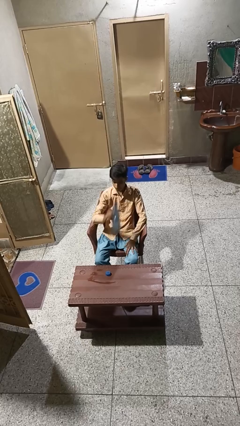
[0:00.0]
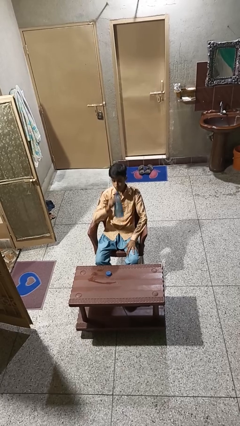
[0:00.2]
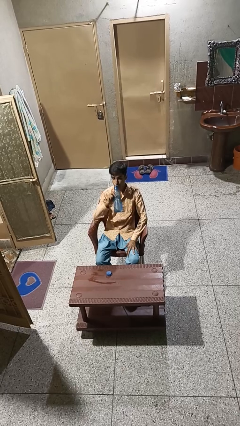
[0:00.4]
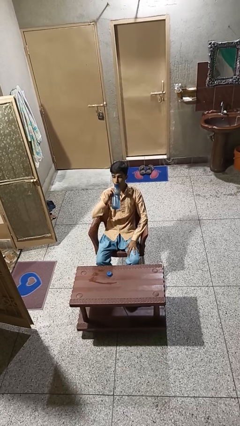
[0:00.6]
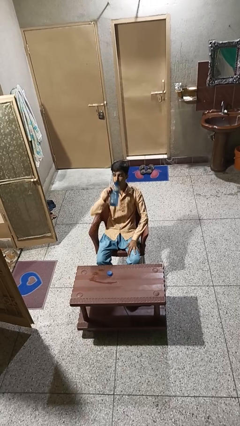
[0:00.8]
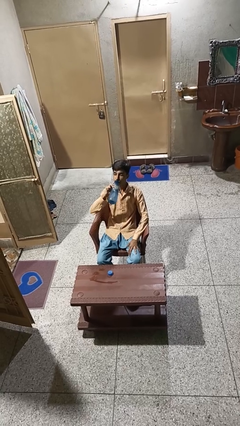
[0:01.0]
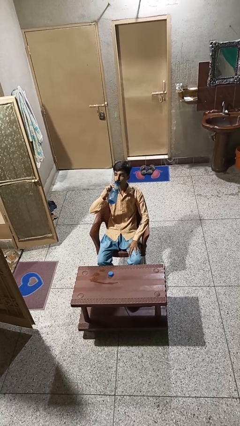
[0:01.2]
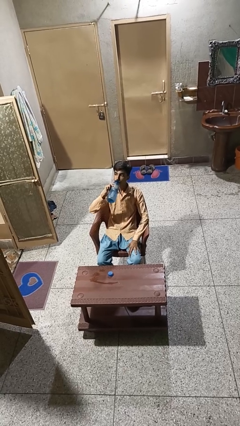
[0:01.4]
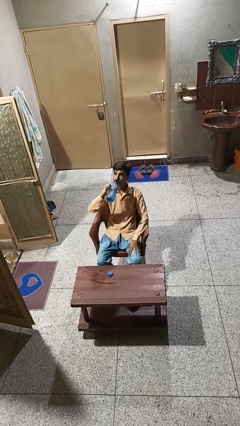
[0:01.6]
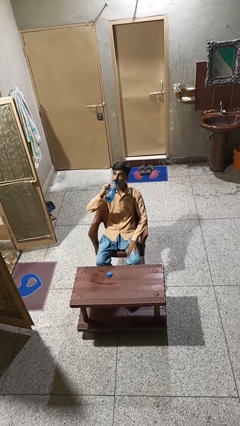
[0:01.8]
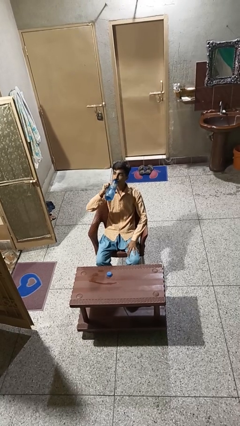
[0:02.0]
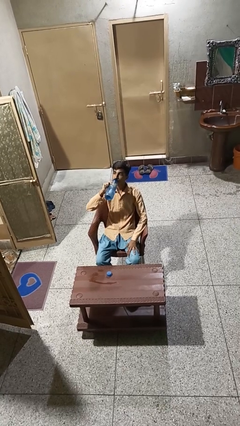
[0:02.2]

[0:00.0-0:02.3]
person drinks from bottle

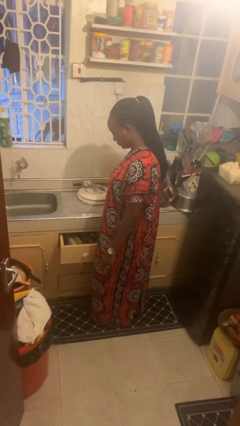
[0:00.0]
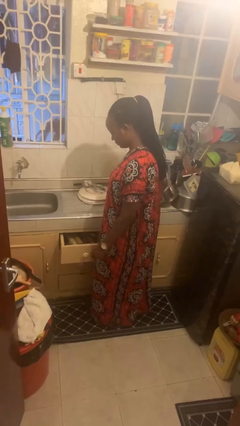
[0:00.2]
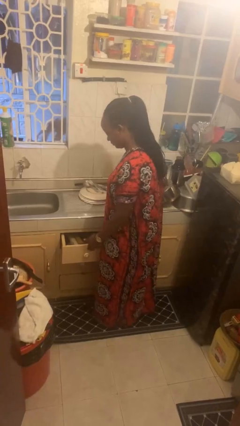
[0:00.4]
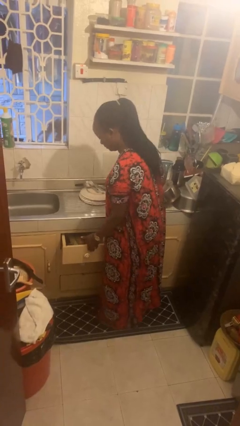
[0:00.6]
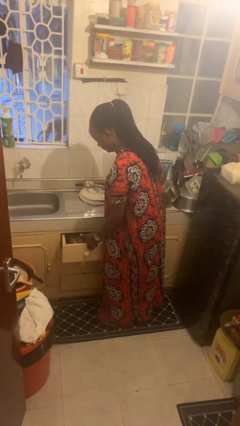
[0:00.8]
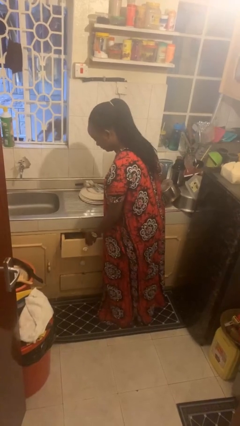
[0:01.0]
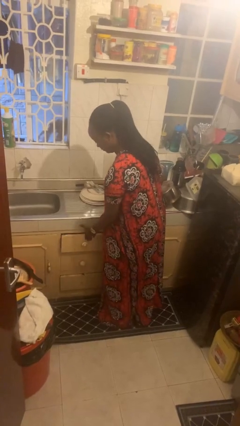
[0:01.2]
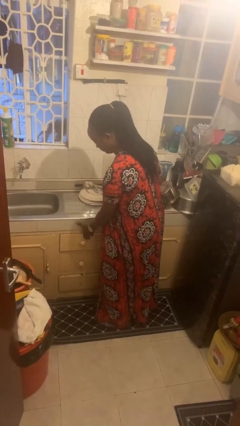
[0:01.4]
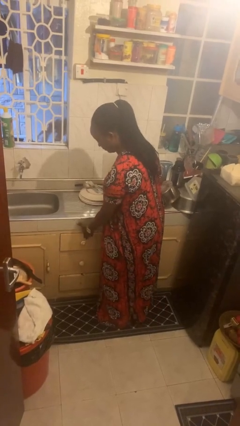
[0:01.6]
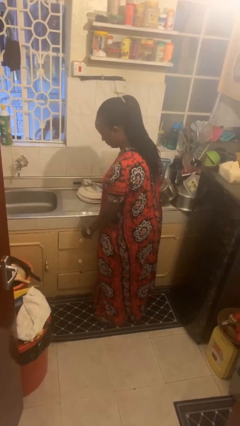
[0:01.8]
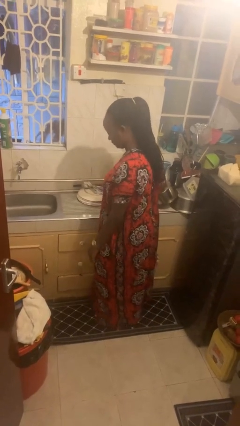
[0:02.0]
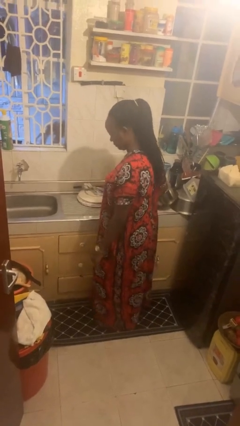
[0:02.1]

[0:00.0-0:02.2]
person closes kitchen drawer

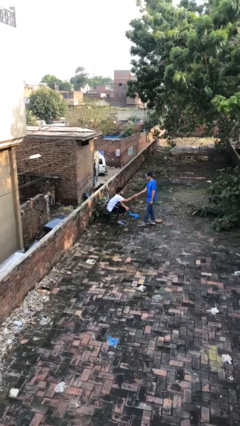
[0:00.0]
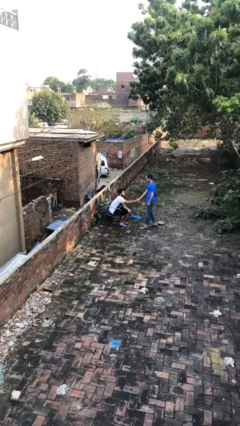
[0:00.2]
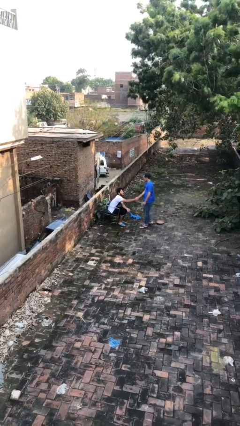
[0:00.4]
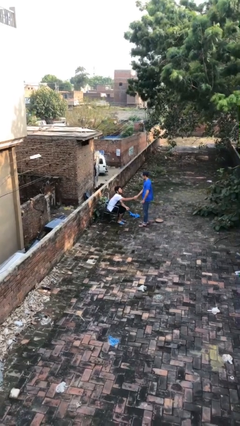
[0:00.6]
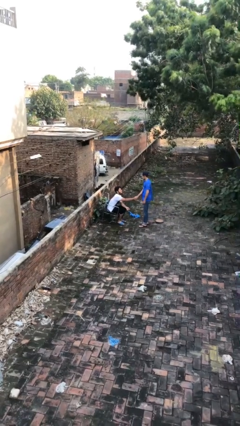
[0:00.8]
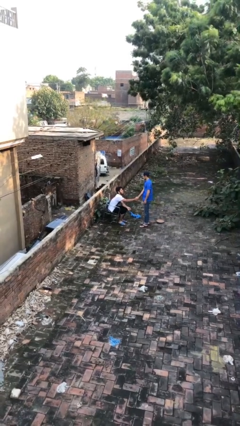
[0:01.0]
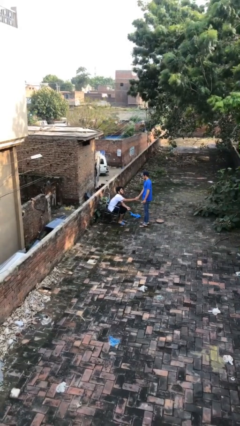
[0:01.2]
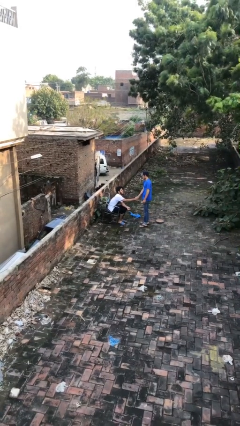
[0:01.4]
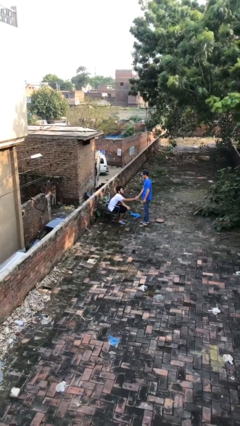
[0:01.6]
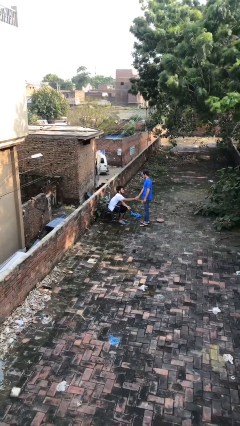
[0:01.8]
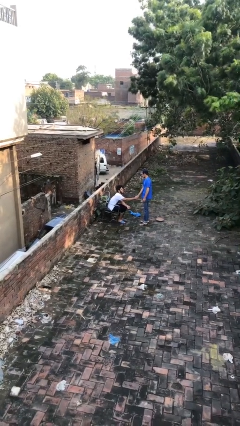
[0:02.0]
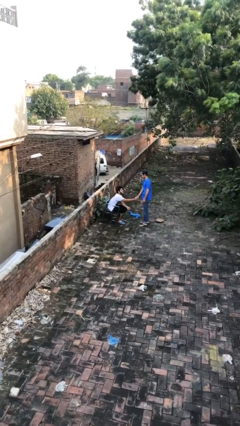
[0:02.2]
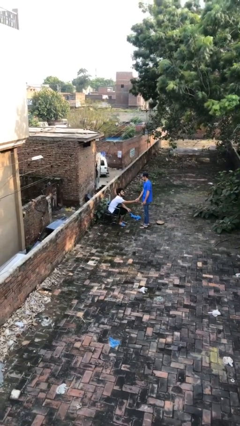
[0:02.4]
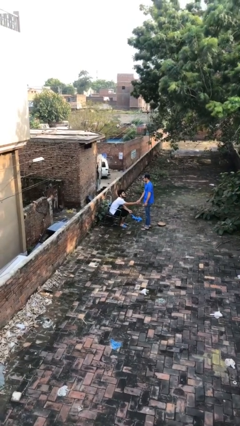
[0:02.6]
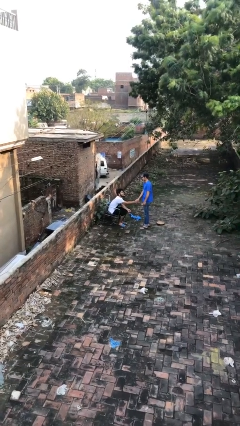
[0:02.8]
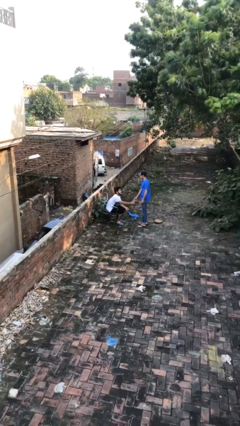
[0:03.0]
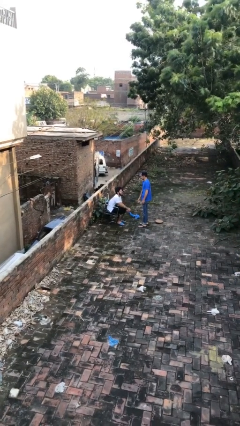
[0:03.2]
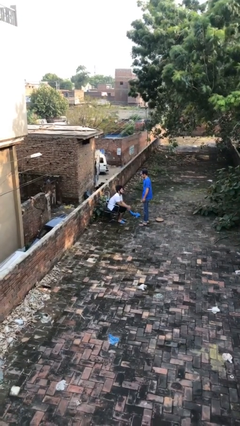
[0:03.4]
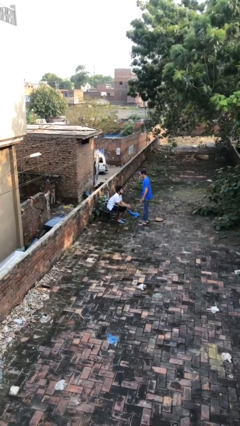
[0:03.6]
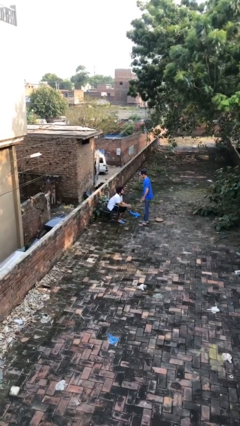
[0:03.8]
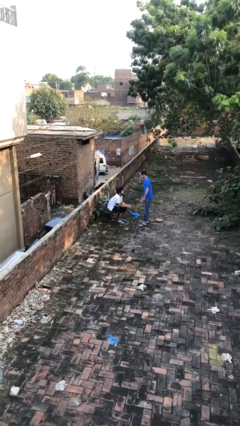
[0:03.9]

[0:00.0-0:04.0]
person shakes hand

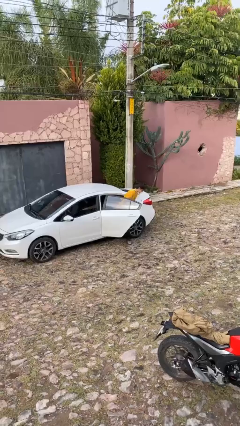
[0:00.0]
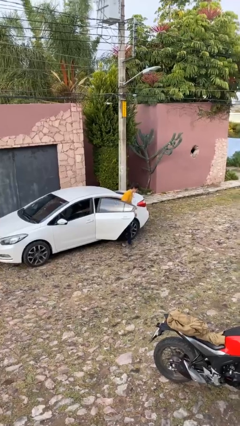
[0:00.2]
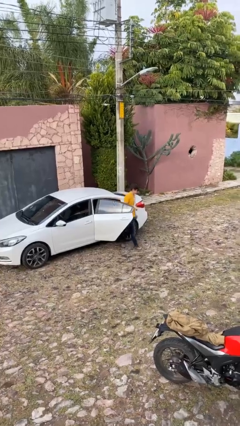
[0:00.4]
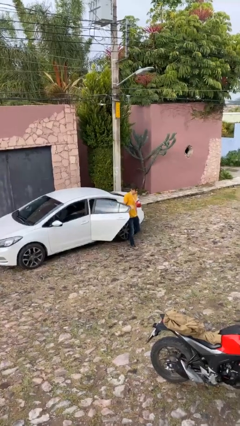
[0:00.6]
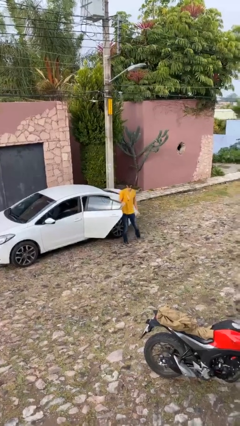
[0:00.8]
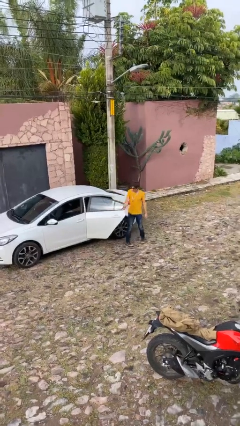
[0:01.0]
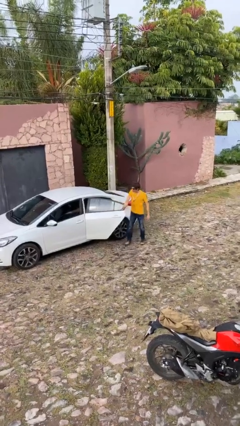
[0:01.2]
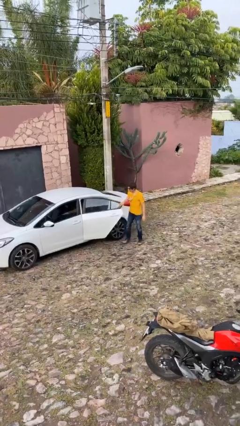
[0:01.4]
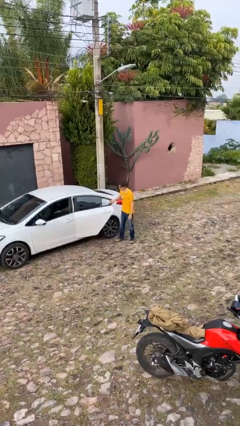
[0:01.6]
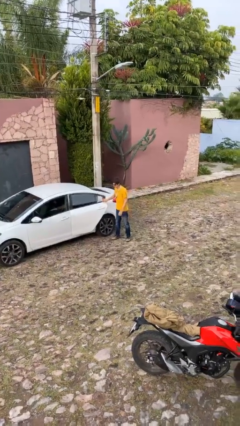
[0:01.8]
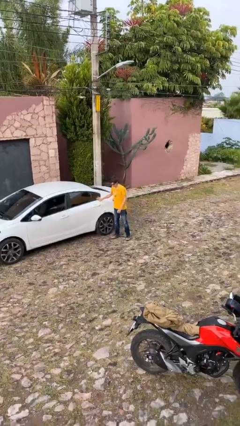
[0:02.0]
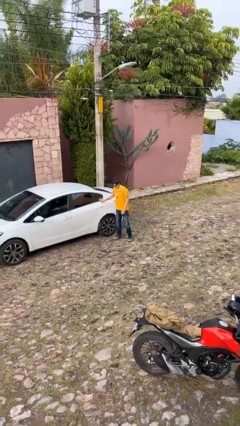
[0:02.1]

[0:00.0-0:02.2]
person exits car

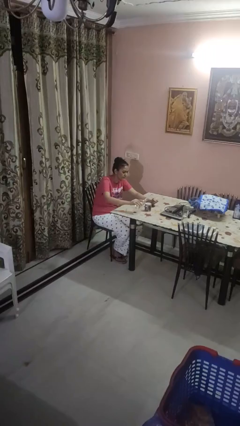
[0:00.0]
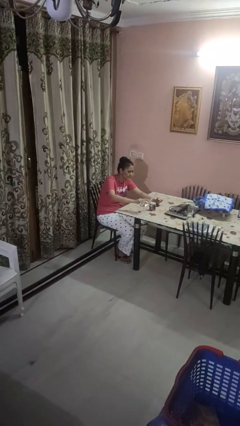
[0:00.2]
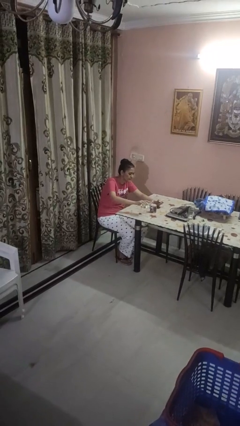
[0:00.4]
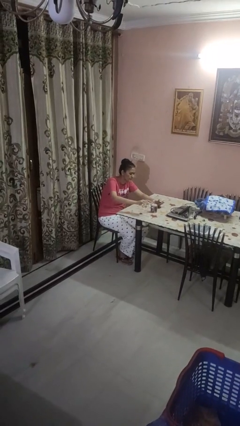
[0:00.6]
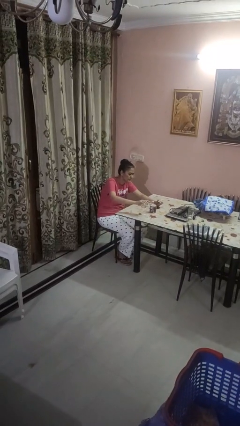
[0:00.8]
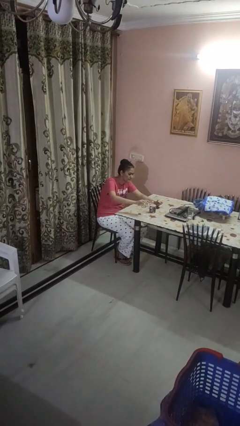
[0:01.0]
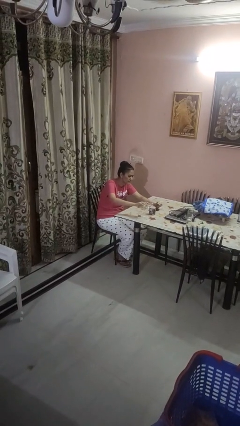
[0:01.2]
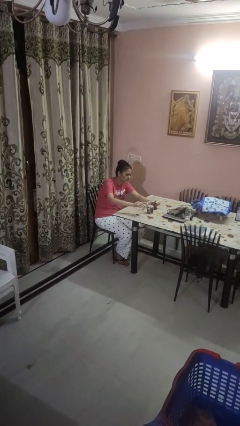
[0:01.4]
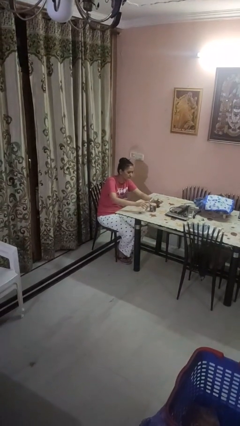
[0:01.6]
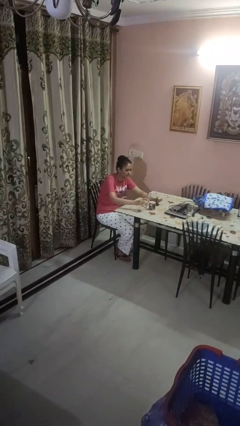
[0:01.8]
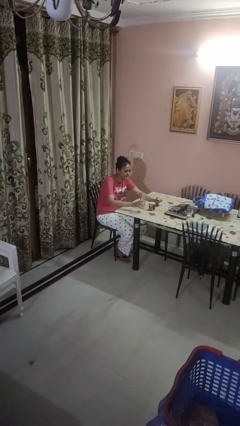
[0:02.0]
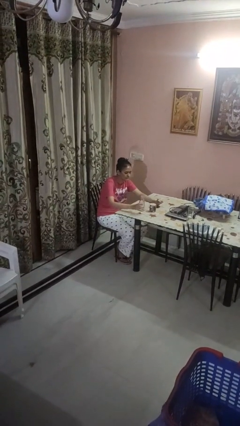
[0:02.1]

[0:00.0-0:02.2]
person pours liquid into cup

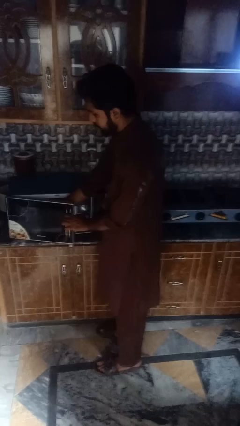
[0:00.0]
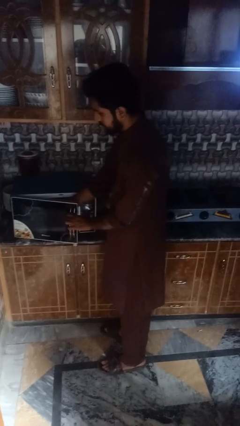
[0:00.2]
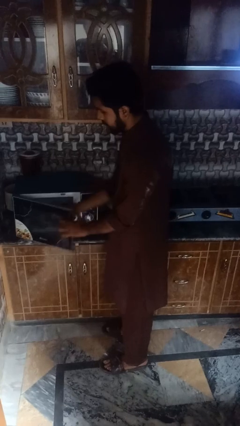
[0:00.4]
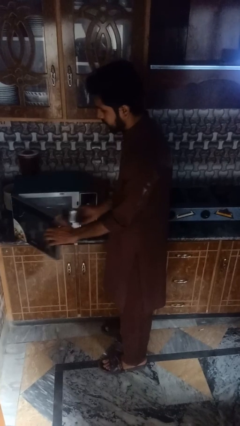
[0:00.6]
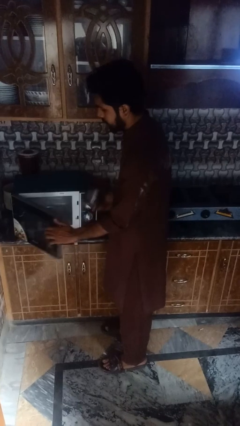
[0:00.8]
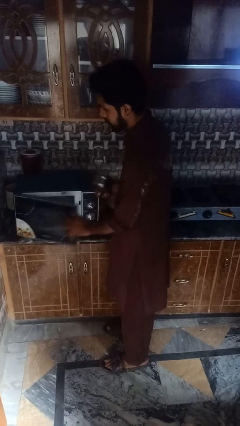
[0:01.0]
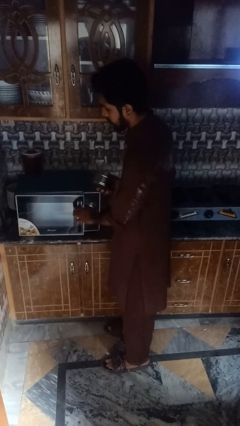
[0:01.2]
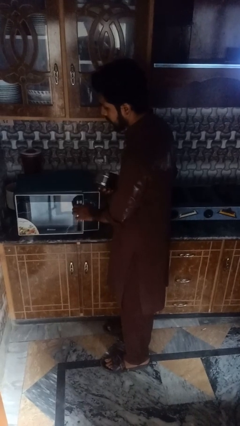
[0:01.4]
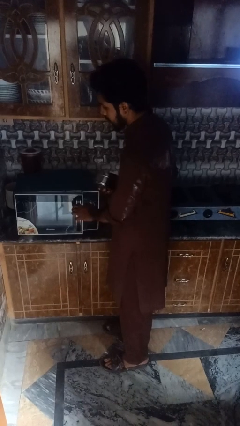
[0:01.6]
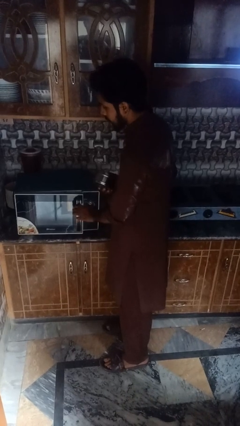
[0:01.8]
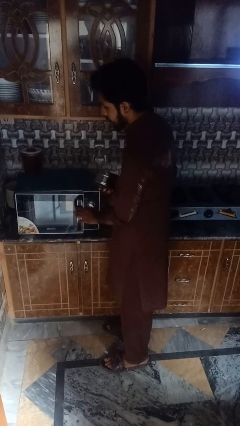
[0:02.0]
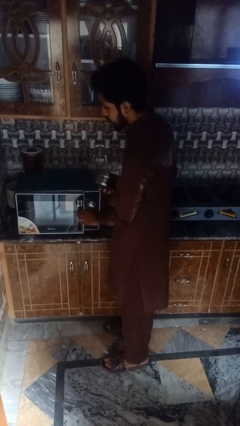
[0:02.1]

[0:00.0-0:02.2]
person takes object from microwave

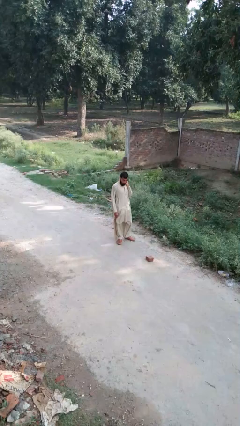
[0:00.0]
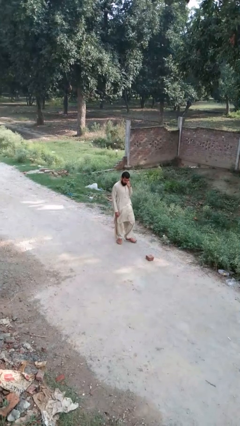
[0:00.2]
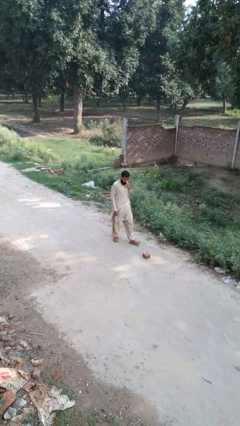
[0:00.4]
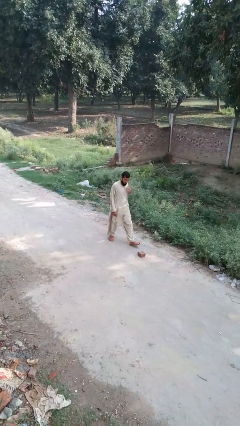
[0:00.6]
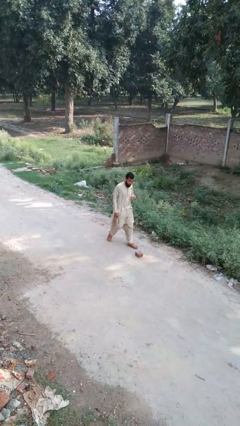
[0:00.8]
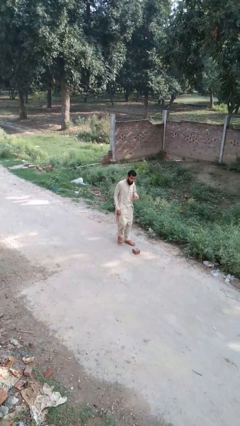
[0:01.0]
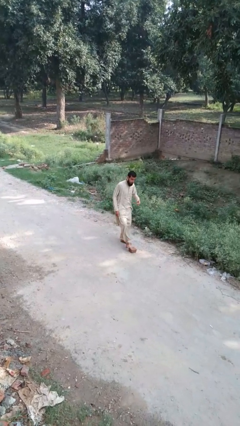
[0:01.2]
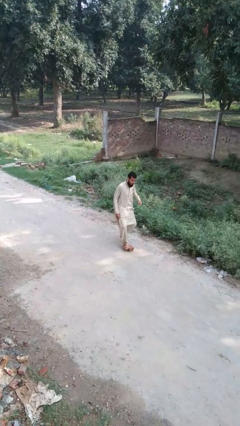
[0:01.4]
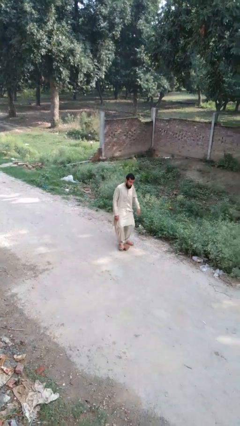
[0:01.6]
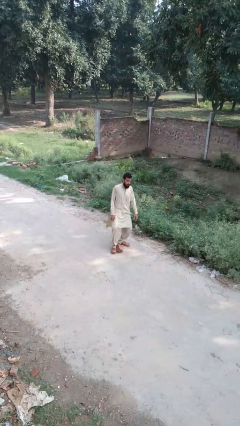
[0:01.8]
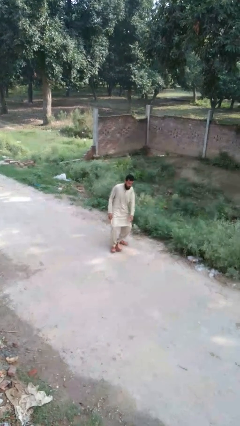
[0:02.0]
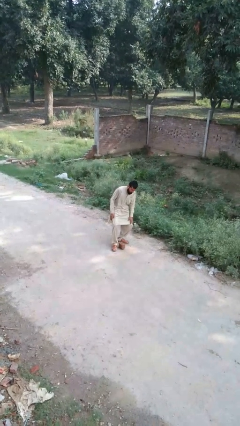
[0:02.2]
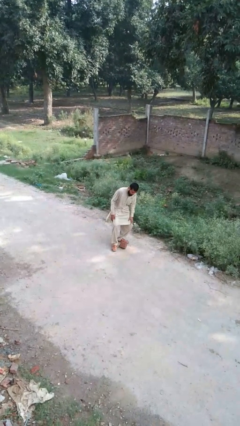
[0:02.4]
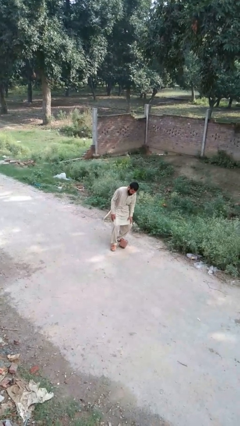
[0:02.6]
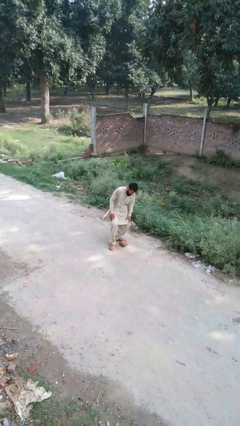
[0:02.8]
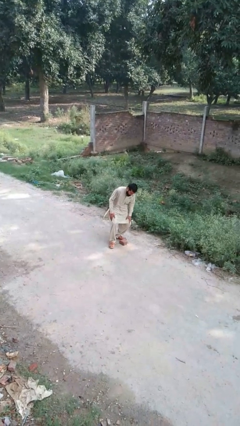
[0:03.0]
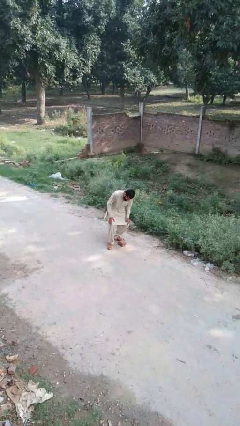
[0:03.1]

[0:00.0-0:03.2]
person trips on object on floor
